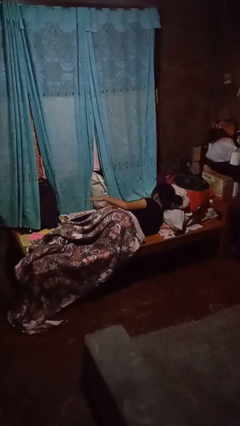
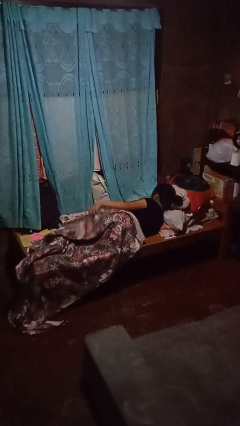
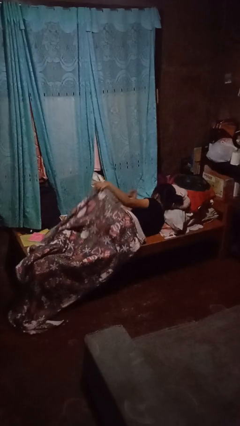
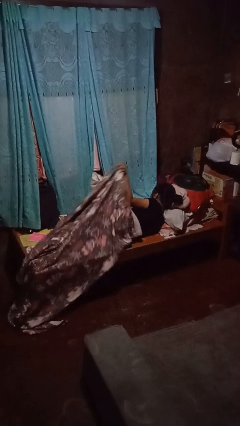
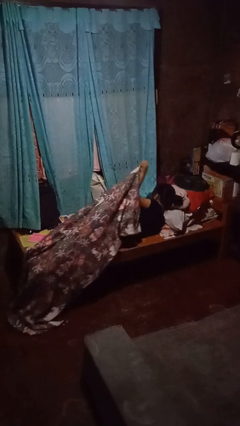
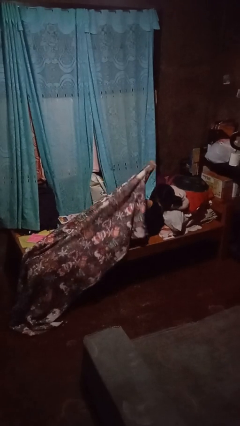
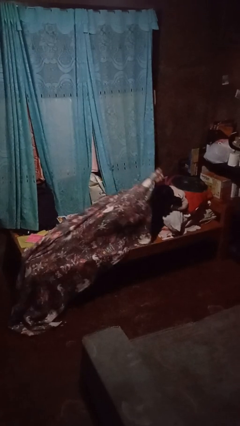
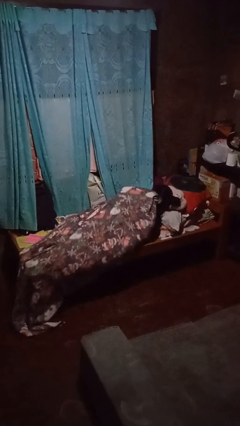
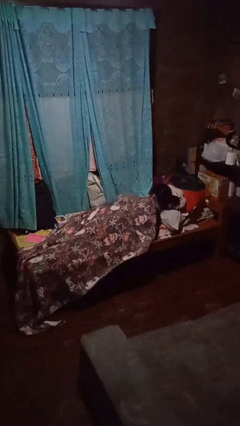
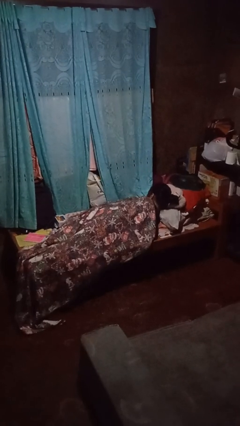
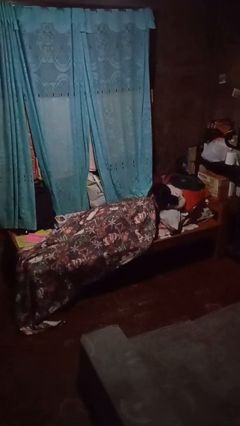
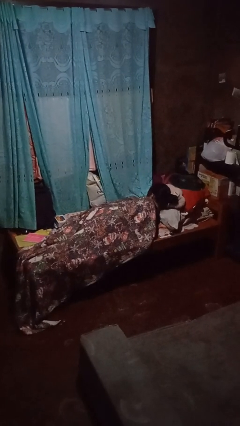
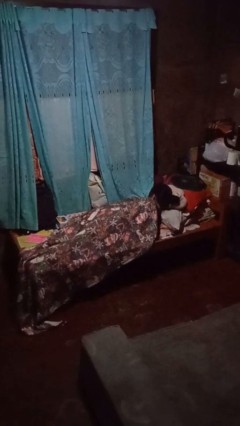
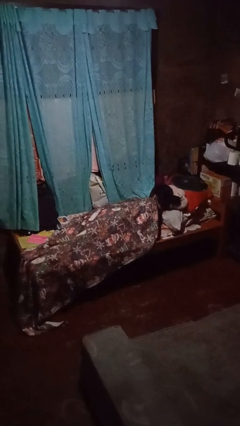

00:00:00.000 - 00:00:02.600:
person covers with bedsheets

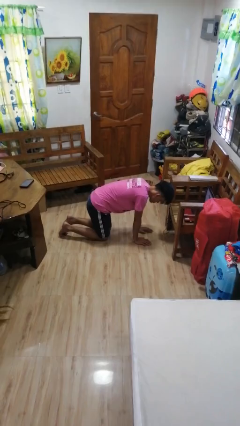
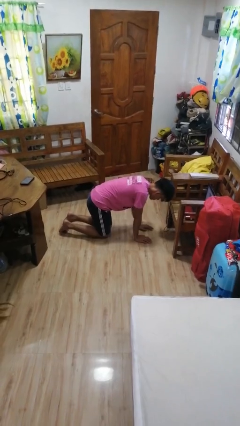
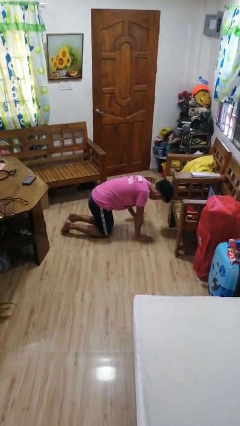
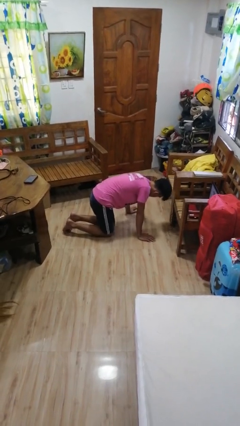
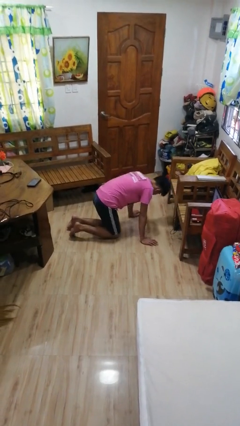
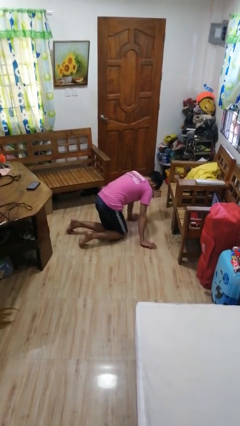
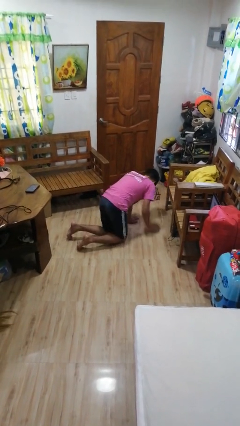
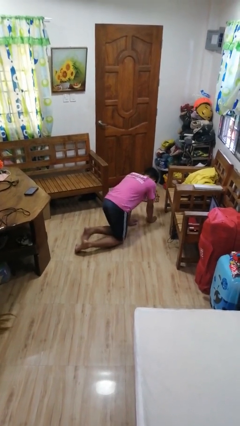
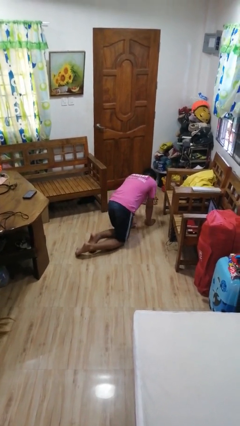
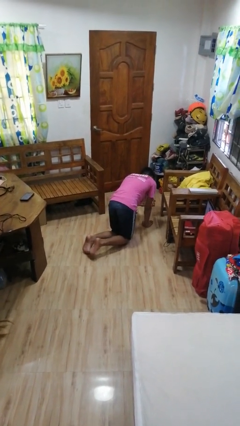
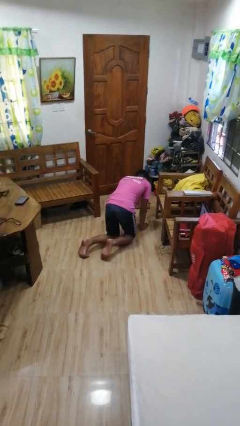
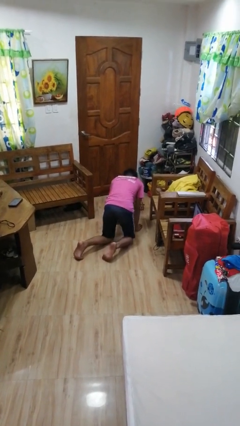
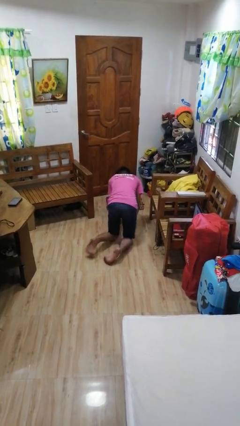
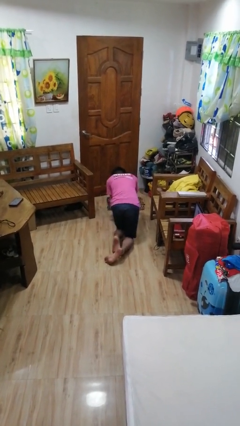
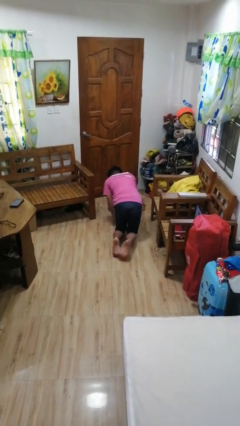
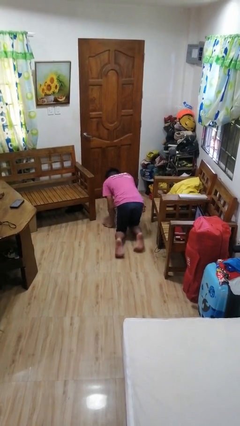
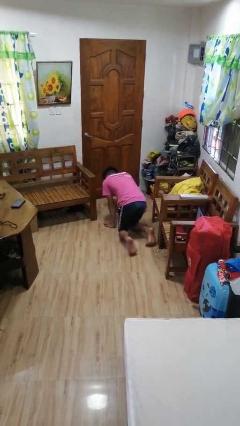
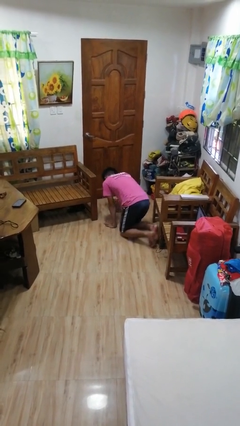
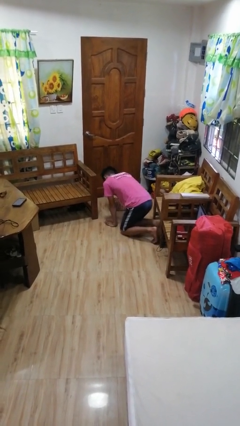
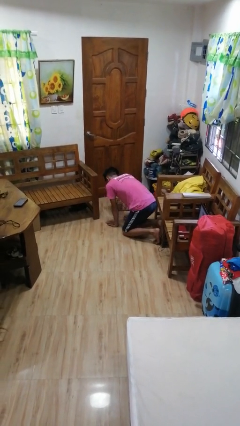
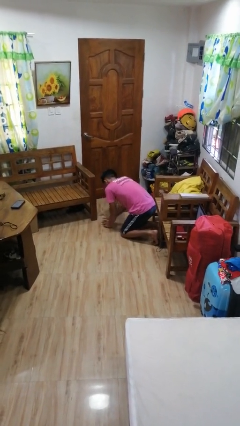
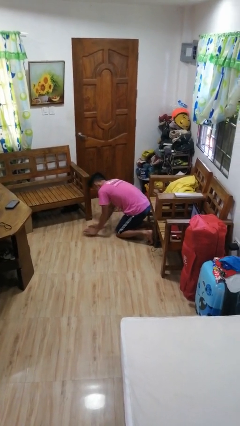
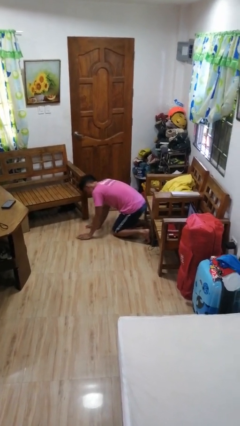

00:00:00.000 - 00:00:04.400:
person crawls

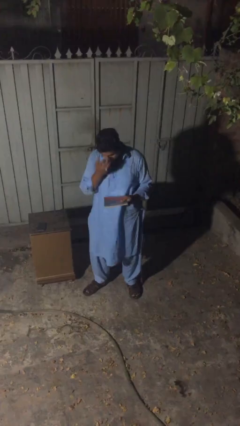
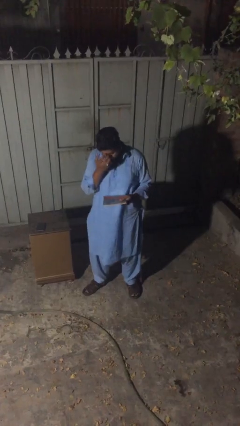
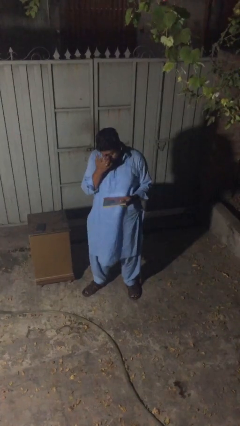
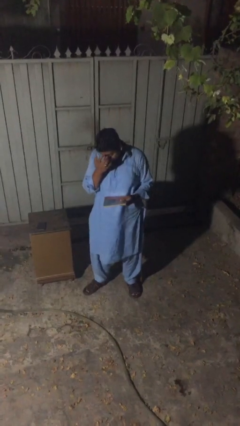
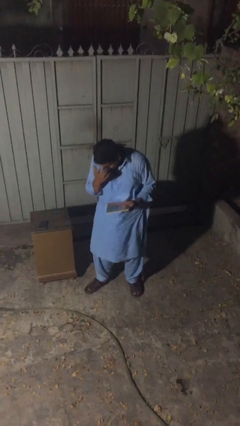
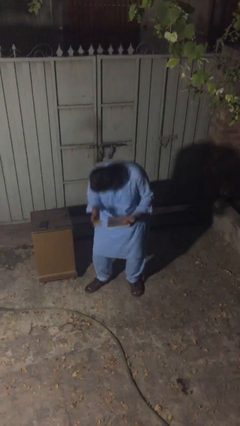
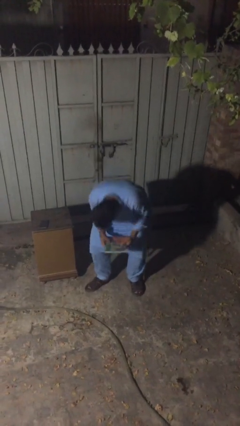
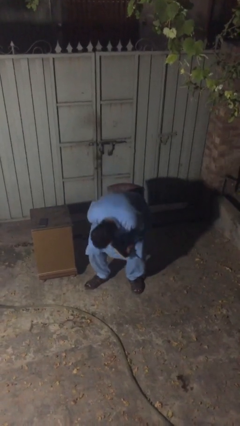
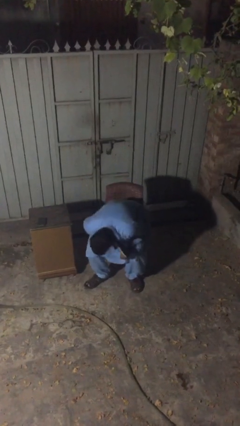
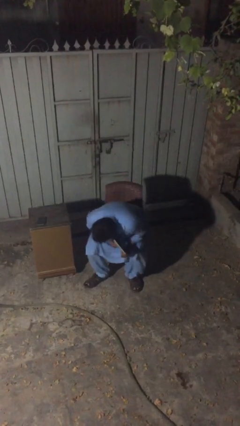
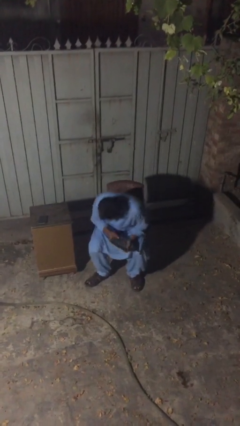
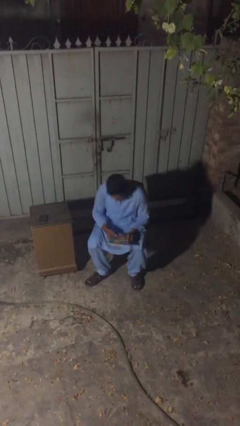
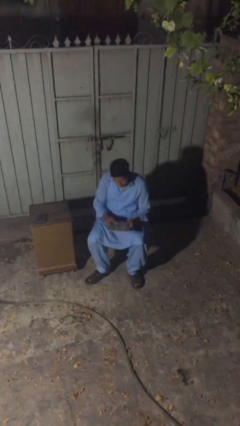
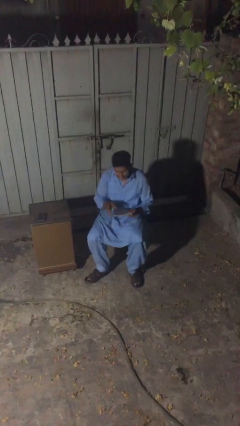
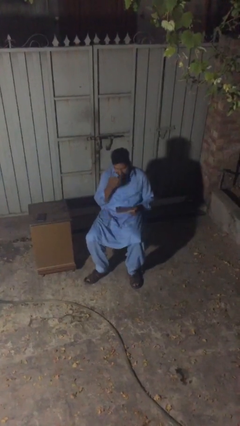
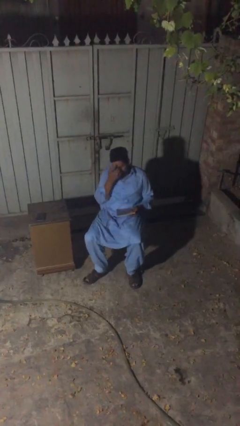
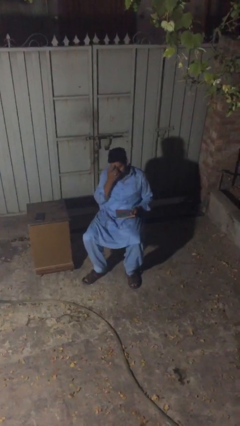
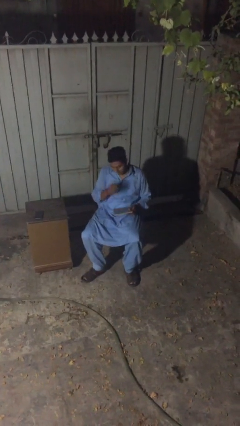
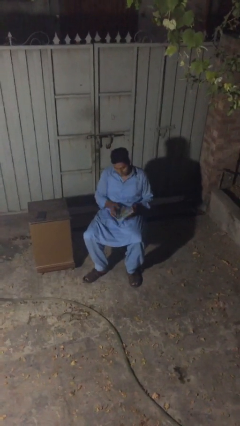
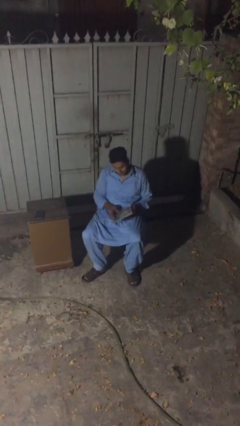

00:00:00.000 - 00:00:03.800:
person sits down

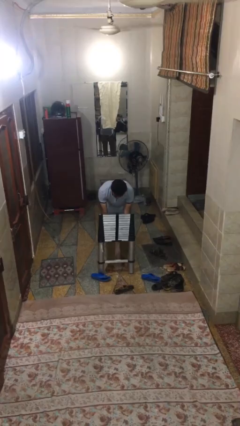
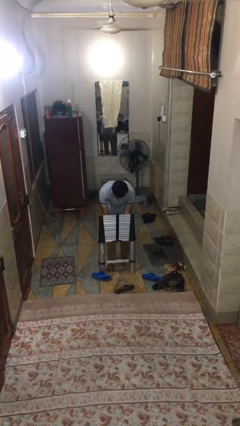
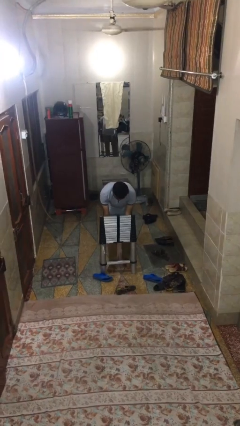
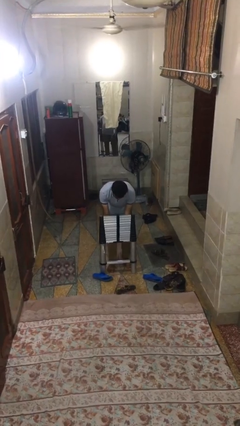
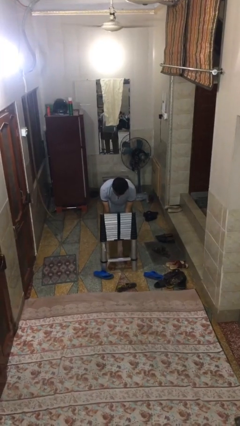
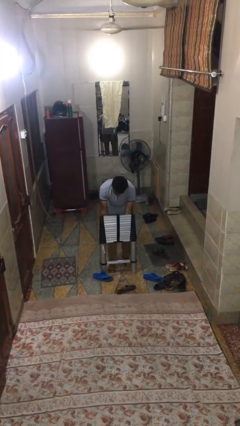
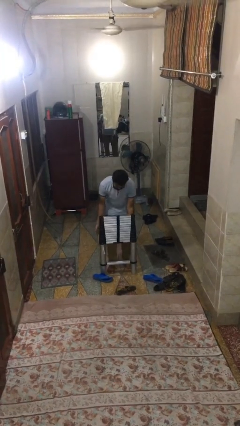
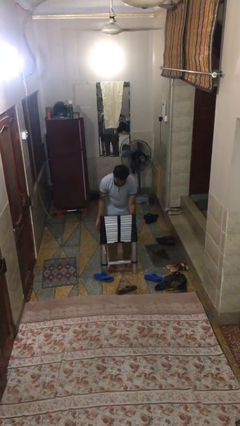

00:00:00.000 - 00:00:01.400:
person puts down object on floor

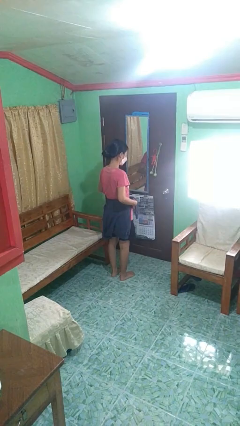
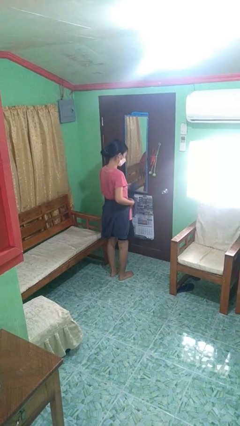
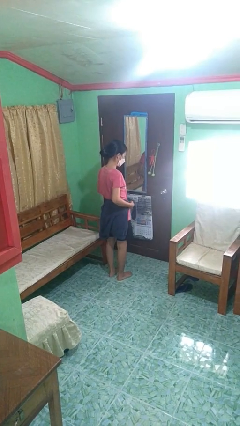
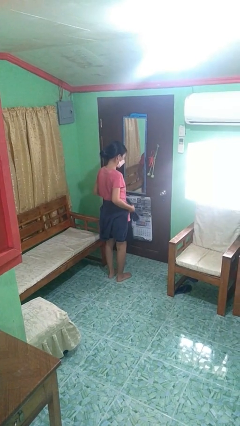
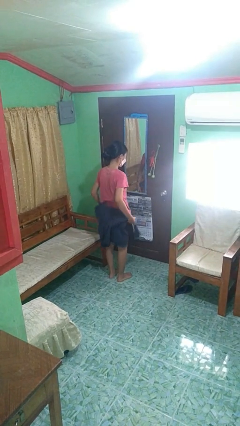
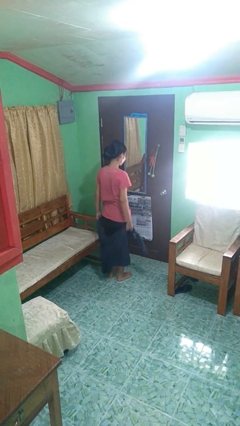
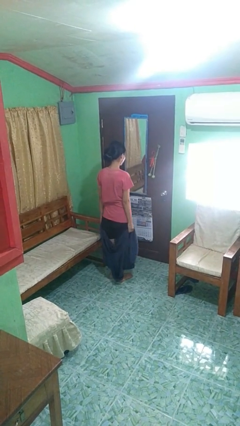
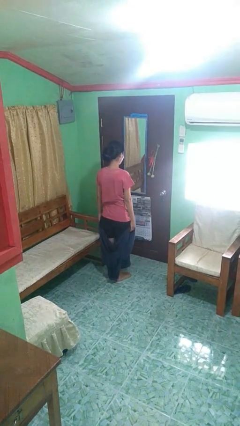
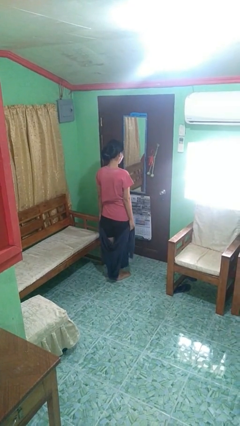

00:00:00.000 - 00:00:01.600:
person unties jacket around waist

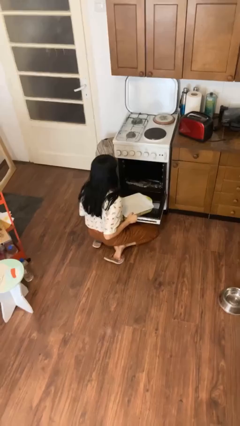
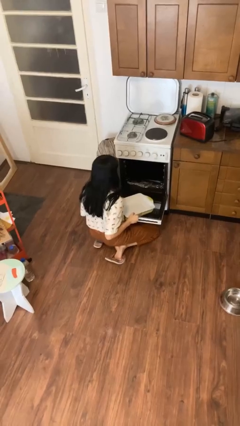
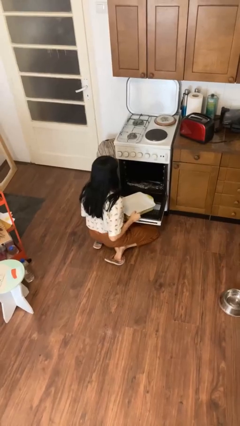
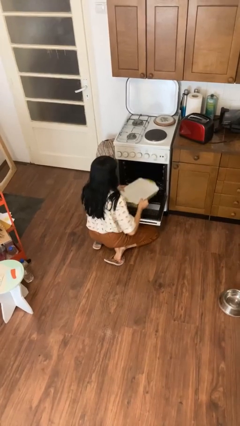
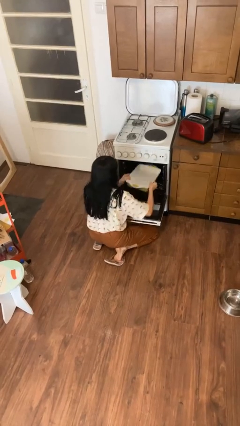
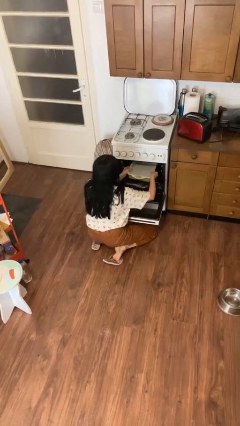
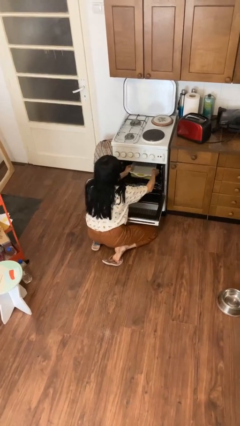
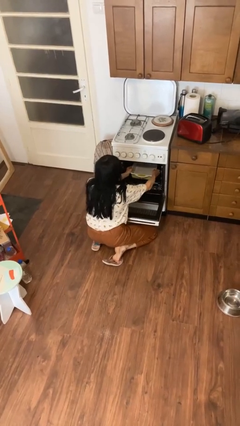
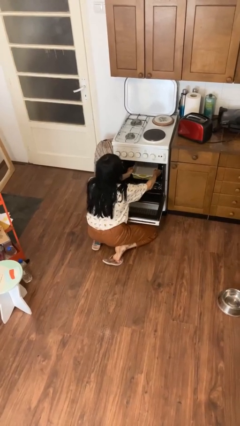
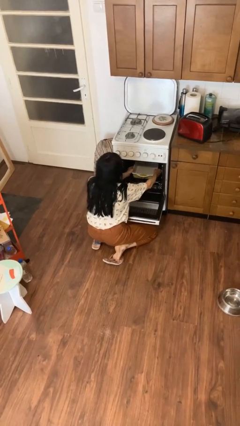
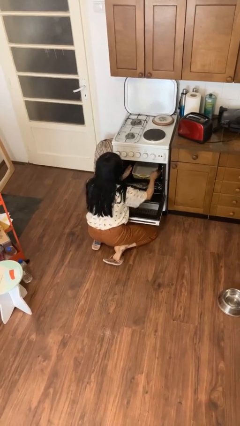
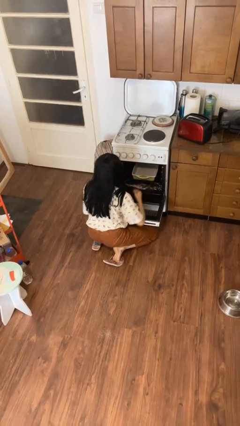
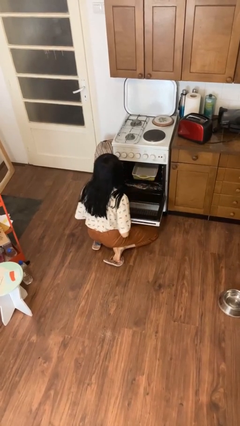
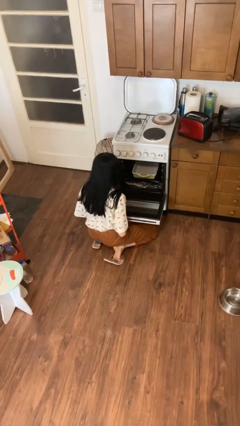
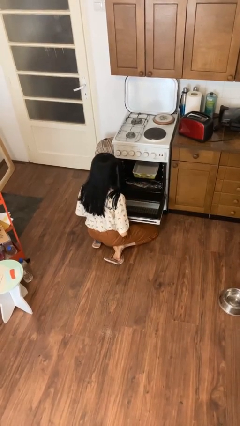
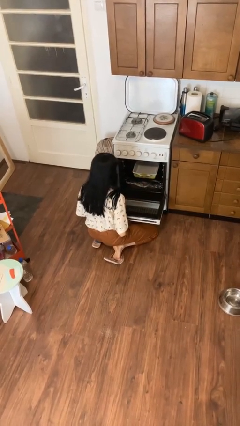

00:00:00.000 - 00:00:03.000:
person puts object into oven

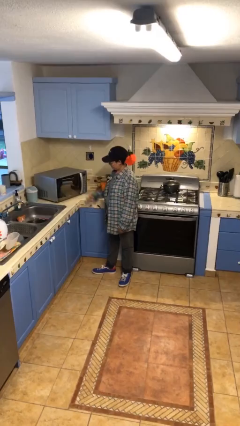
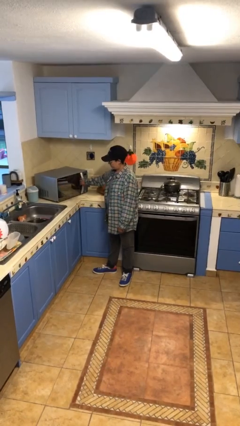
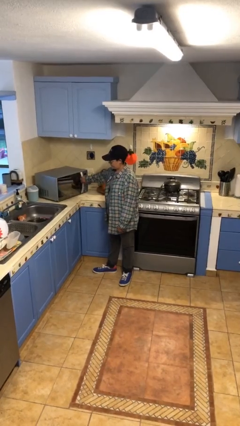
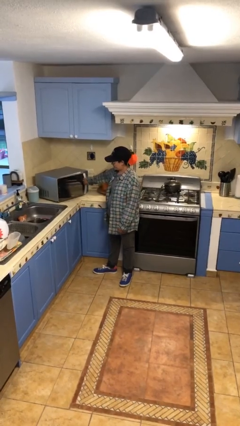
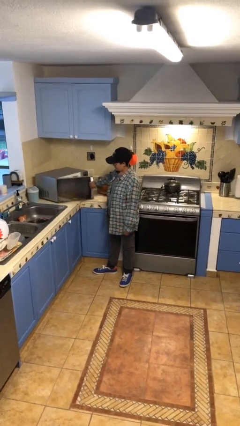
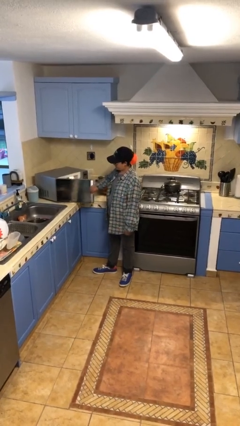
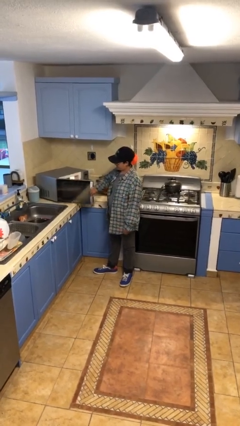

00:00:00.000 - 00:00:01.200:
person opens microwave
